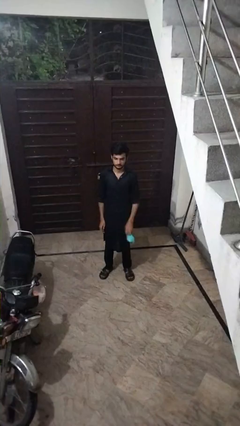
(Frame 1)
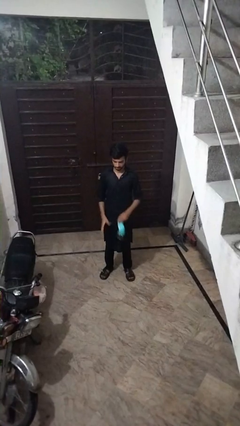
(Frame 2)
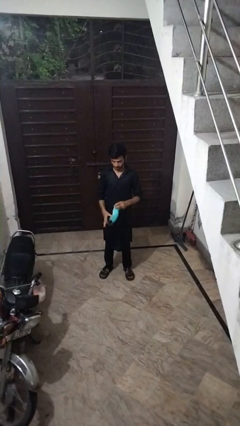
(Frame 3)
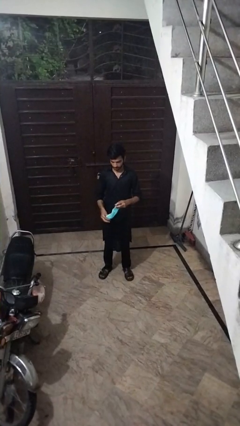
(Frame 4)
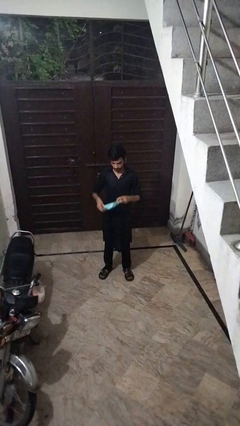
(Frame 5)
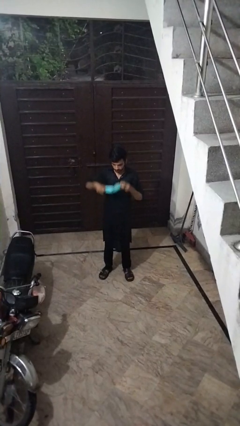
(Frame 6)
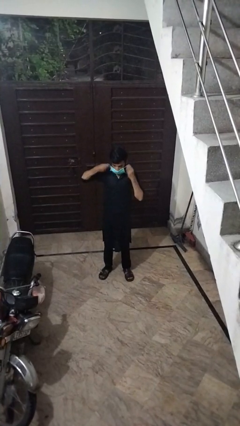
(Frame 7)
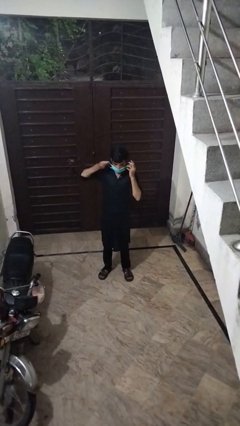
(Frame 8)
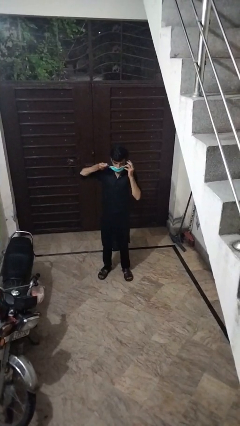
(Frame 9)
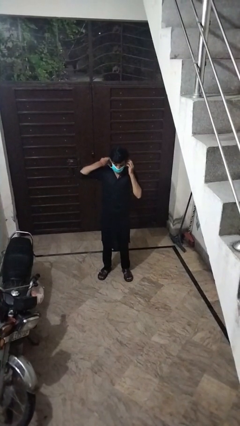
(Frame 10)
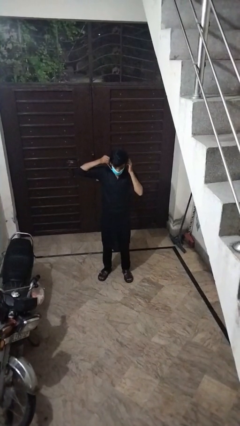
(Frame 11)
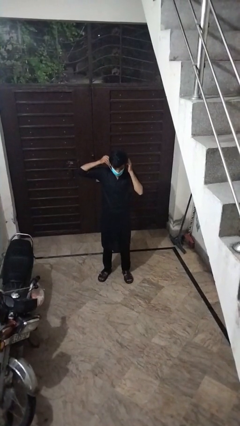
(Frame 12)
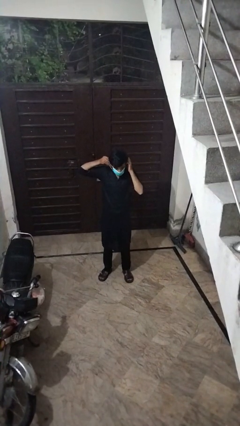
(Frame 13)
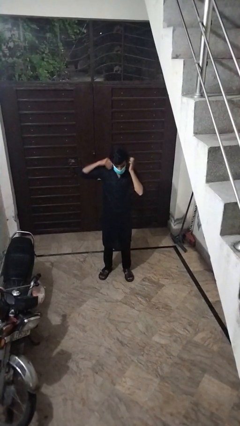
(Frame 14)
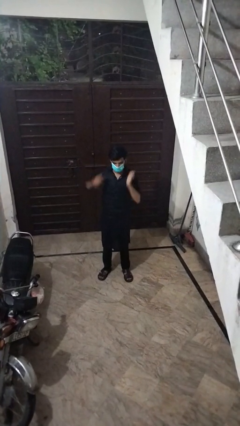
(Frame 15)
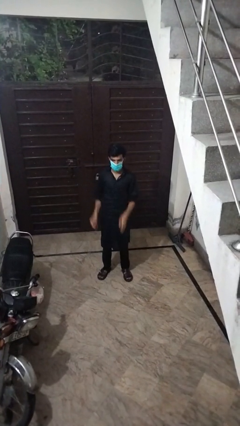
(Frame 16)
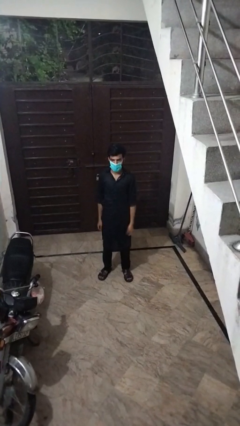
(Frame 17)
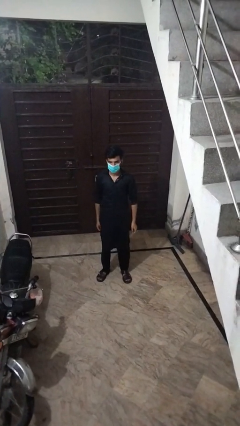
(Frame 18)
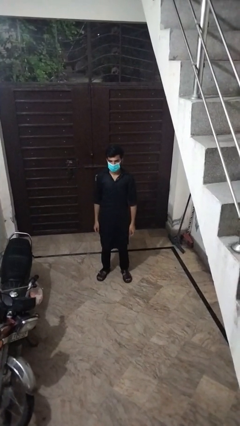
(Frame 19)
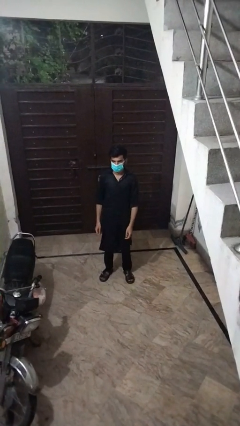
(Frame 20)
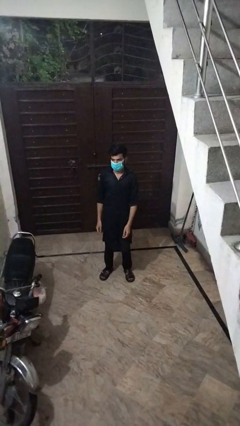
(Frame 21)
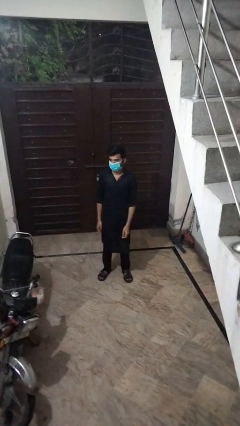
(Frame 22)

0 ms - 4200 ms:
person puts on facemask

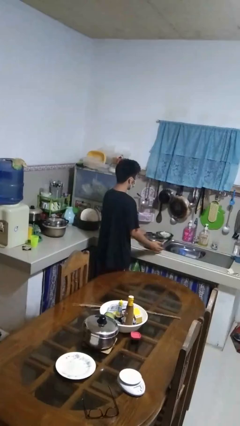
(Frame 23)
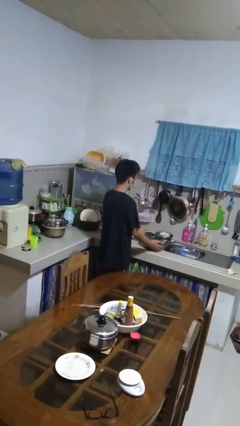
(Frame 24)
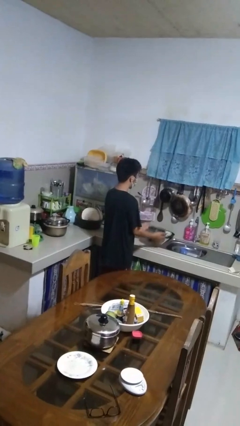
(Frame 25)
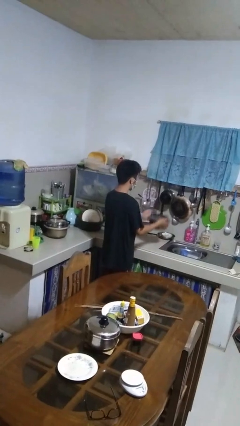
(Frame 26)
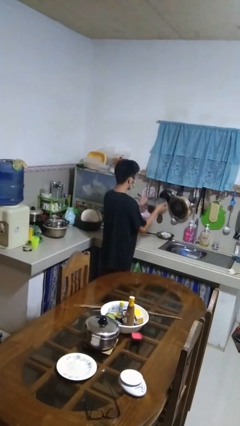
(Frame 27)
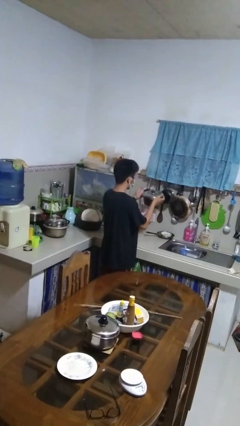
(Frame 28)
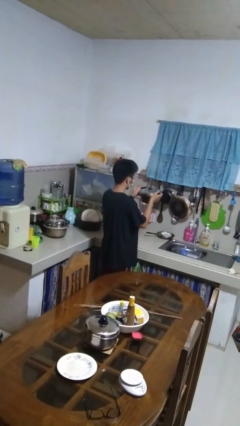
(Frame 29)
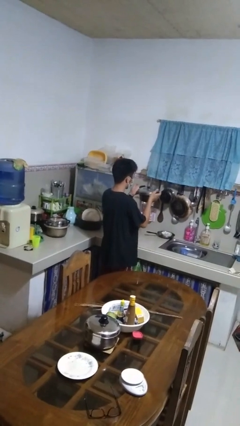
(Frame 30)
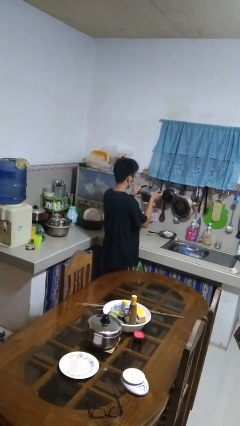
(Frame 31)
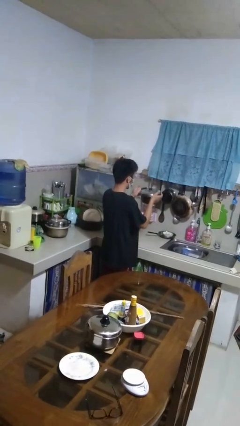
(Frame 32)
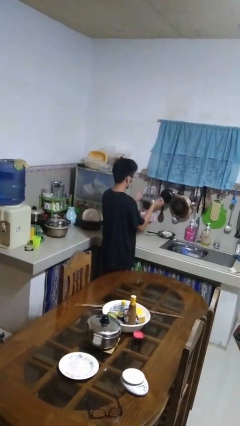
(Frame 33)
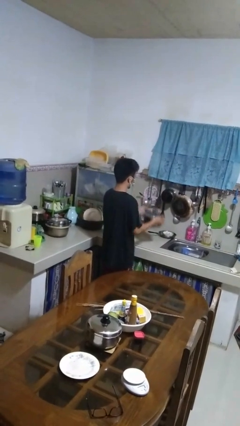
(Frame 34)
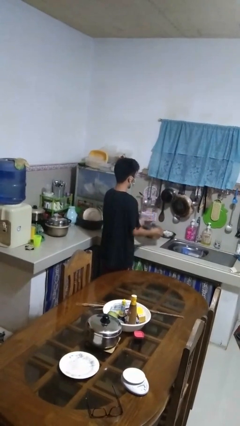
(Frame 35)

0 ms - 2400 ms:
person picks up object from countertop

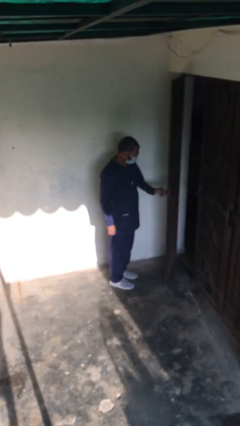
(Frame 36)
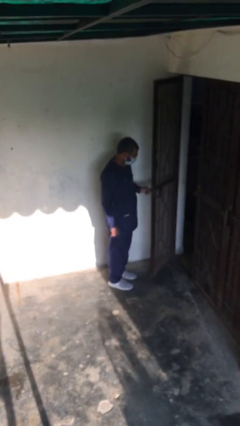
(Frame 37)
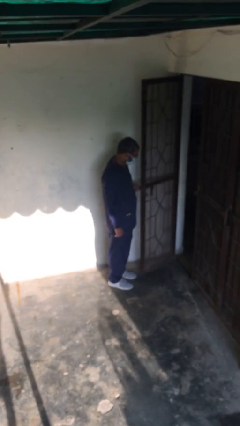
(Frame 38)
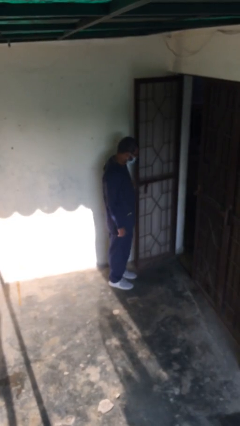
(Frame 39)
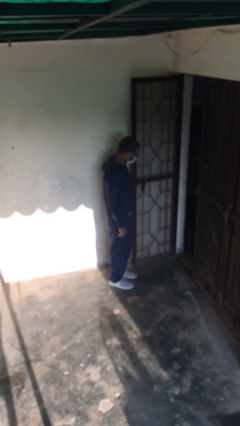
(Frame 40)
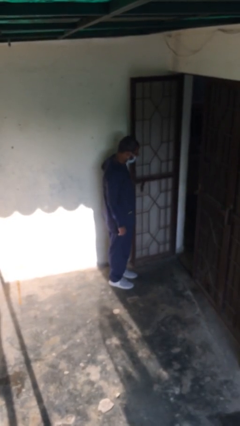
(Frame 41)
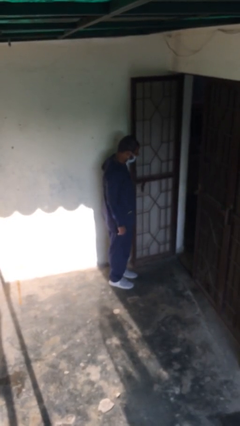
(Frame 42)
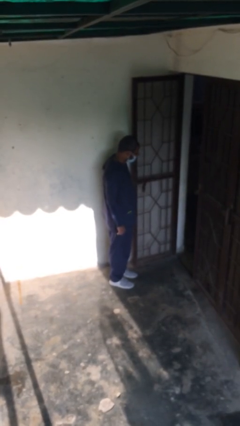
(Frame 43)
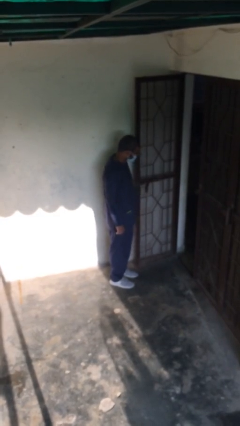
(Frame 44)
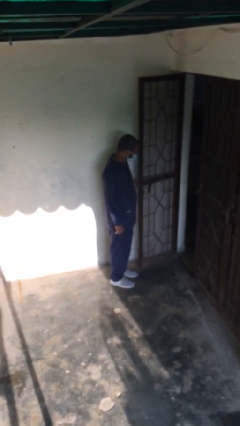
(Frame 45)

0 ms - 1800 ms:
person opens facility door

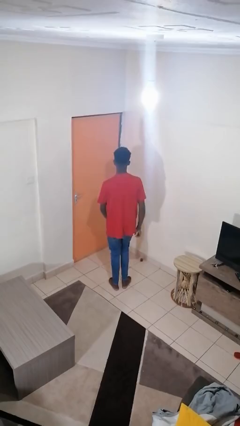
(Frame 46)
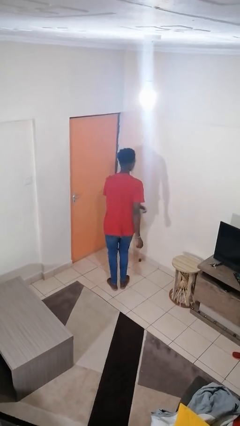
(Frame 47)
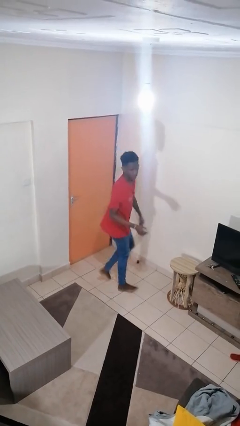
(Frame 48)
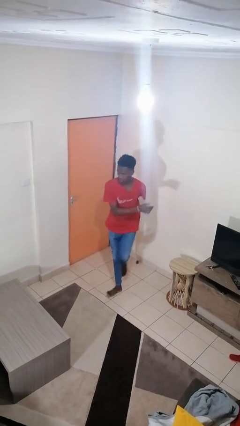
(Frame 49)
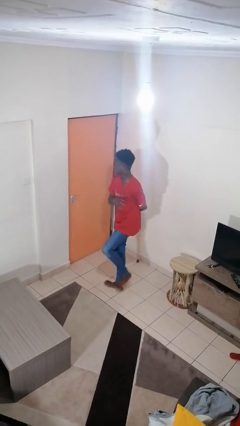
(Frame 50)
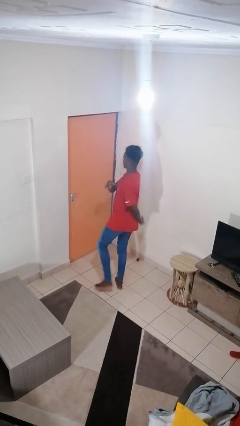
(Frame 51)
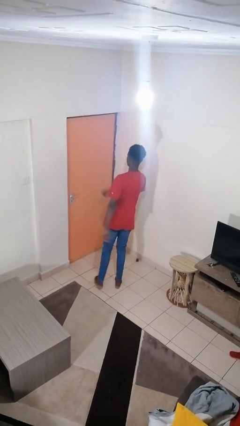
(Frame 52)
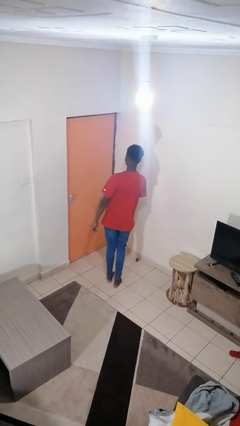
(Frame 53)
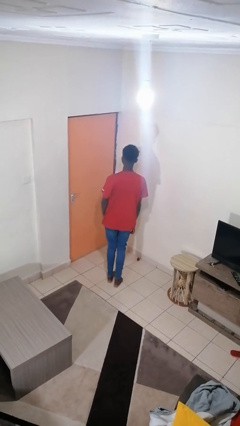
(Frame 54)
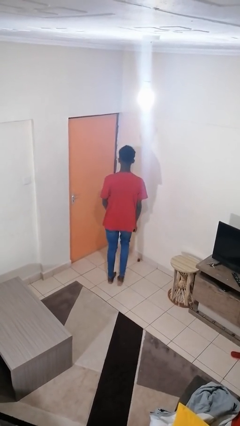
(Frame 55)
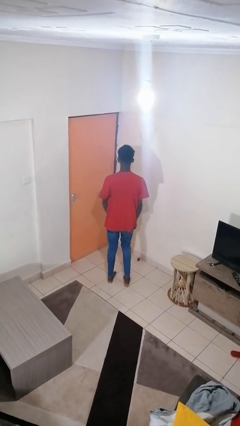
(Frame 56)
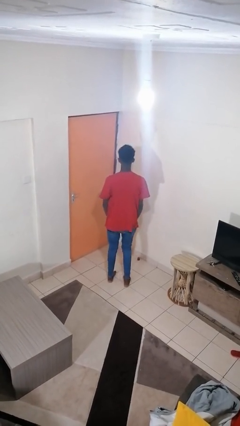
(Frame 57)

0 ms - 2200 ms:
person twirls

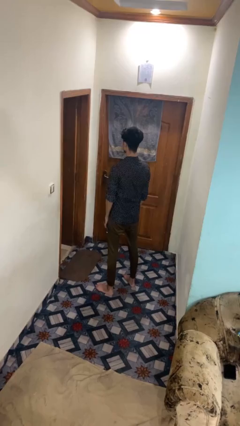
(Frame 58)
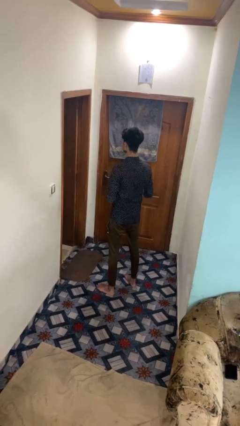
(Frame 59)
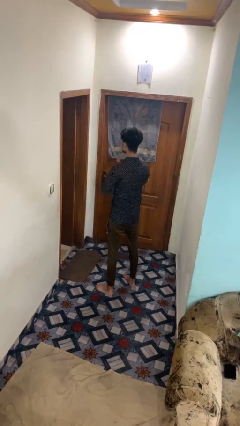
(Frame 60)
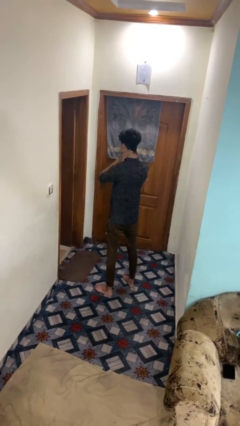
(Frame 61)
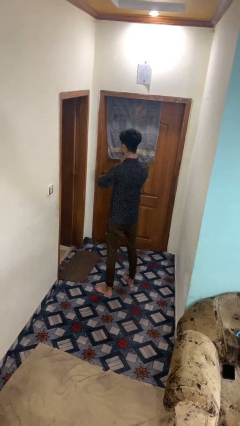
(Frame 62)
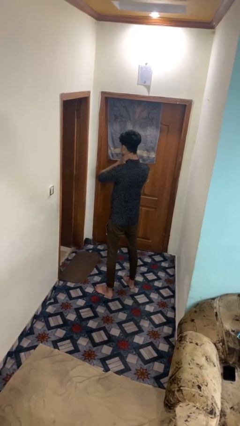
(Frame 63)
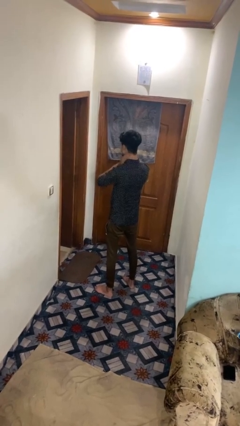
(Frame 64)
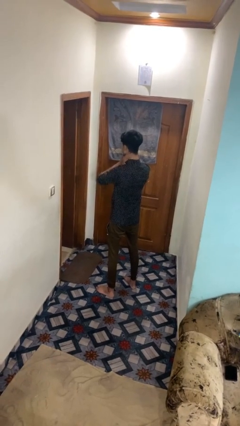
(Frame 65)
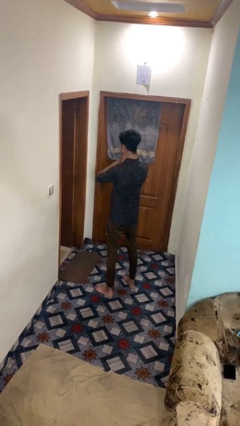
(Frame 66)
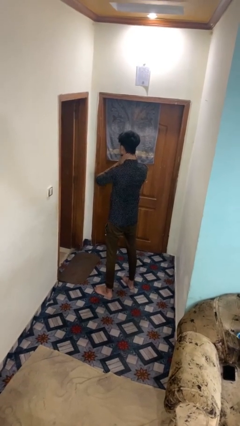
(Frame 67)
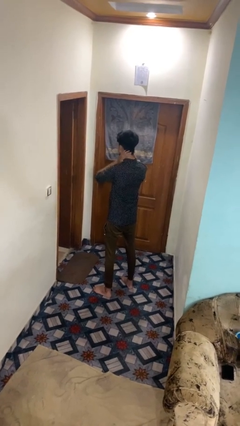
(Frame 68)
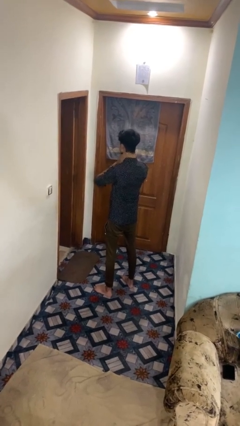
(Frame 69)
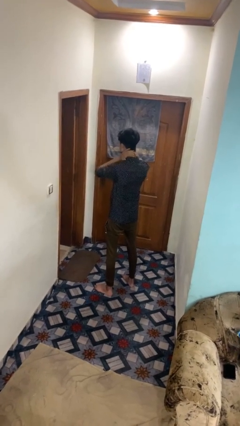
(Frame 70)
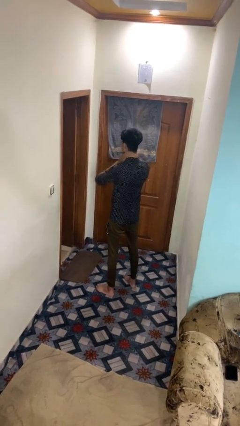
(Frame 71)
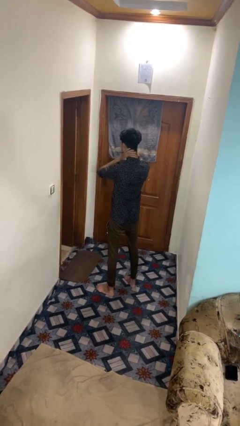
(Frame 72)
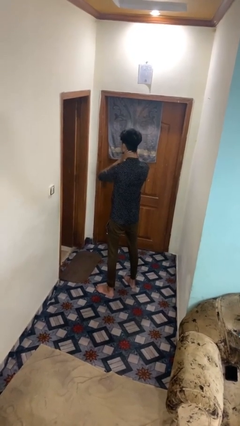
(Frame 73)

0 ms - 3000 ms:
person rubs neck

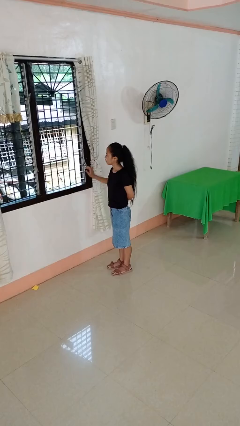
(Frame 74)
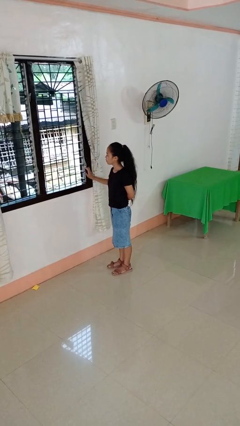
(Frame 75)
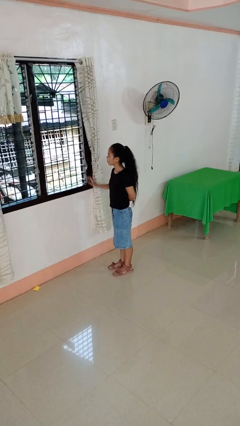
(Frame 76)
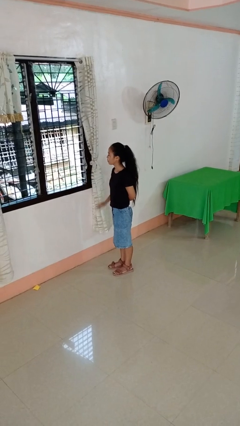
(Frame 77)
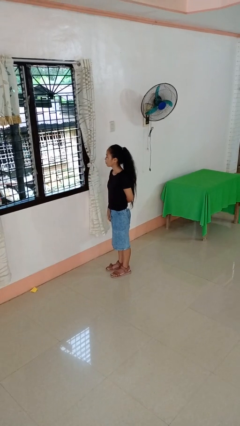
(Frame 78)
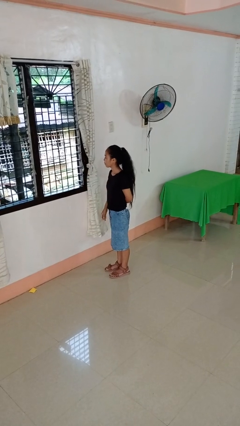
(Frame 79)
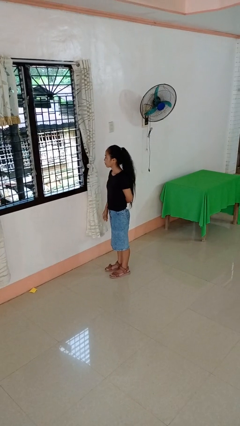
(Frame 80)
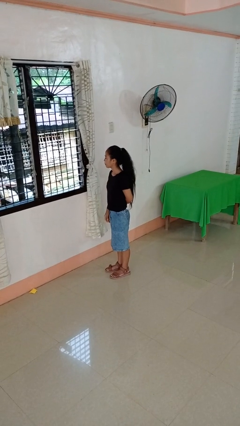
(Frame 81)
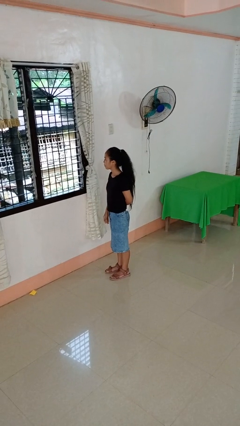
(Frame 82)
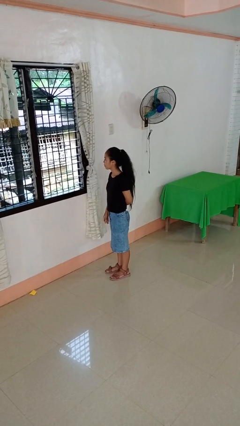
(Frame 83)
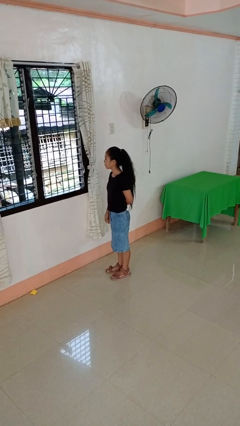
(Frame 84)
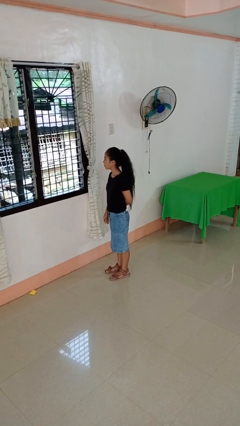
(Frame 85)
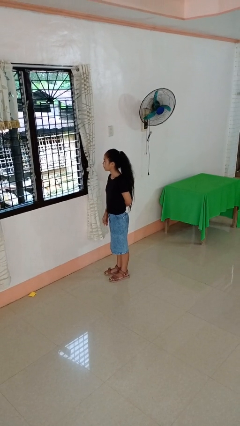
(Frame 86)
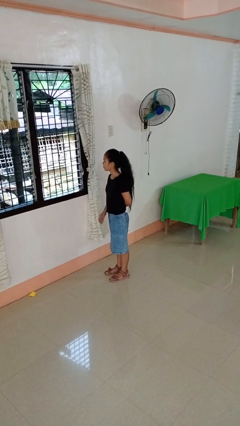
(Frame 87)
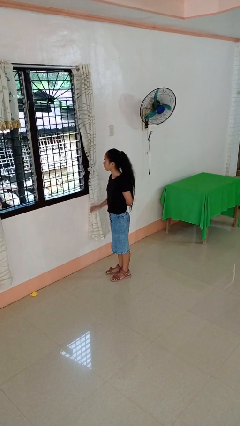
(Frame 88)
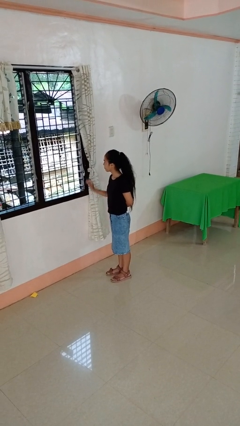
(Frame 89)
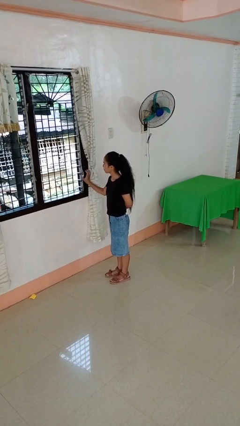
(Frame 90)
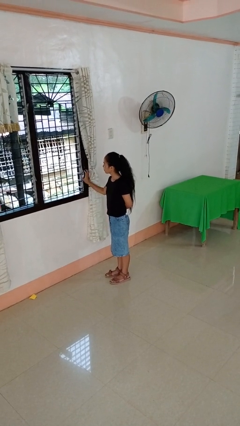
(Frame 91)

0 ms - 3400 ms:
person opens home window

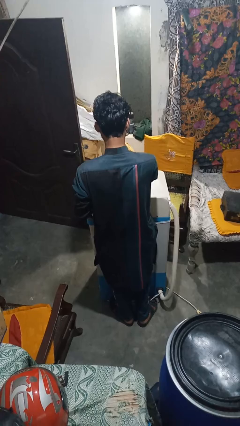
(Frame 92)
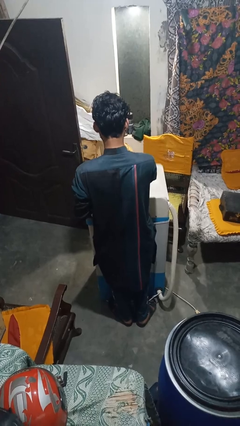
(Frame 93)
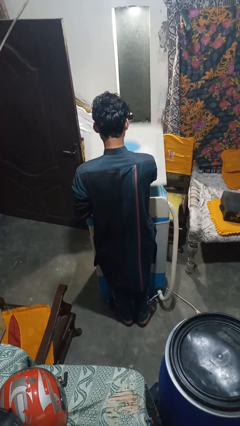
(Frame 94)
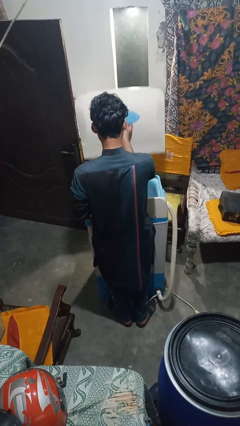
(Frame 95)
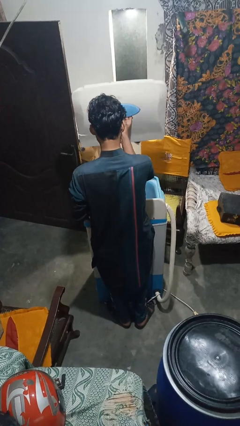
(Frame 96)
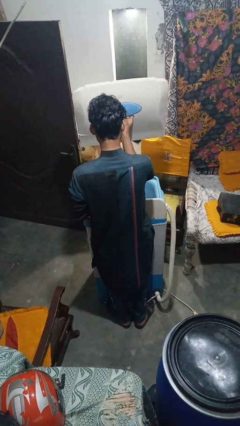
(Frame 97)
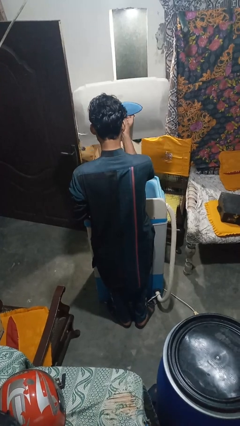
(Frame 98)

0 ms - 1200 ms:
person opens clothes washer
